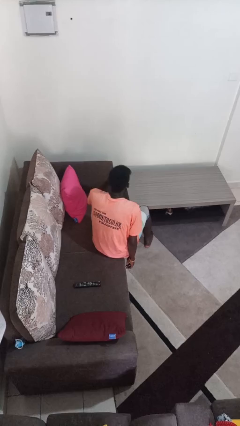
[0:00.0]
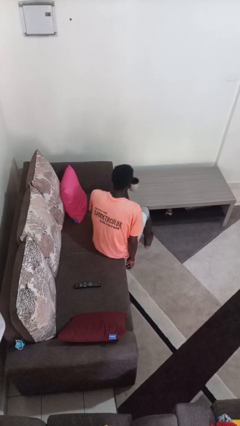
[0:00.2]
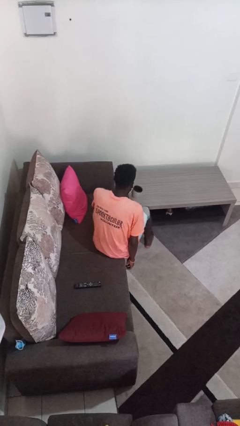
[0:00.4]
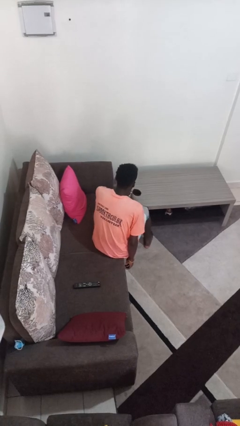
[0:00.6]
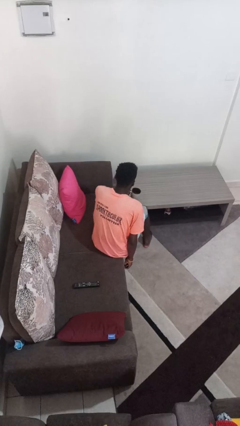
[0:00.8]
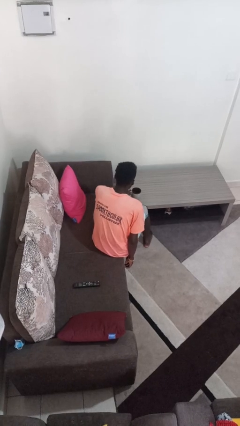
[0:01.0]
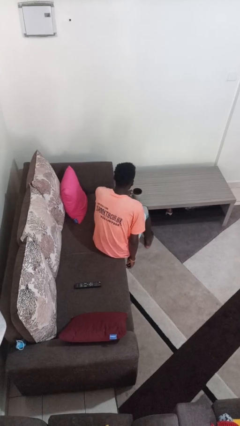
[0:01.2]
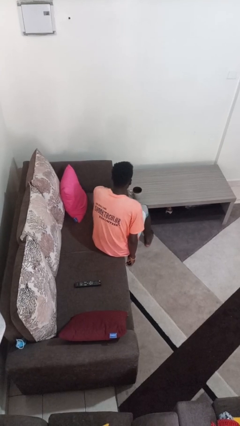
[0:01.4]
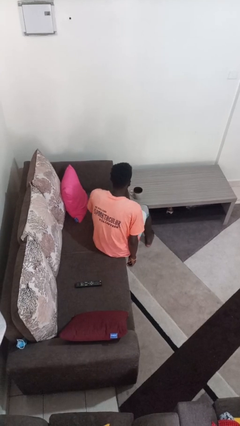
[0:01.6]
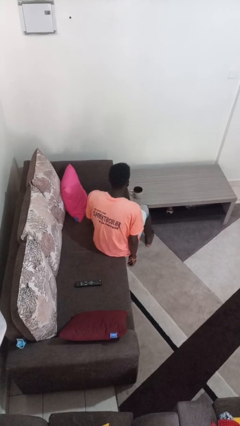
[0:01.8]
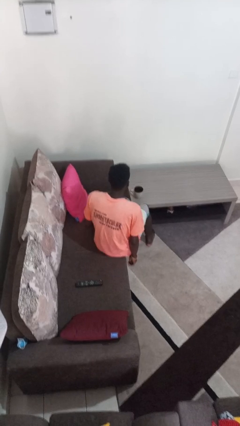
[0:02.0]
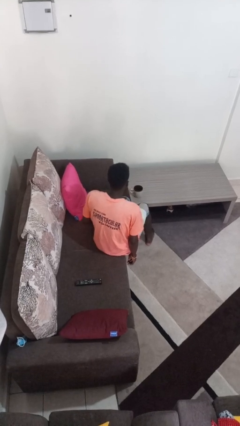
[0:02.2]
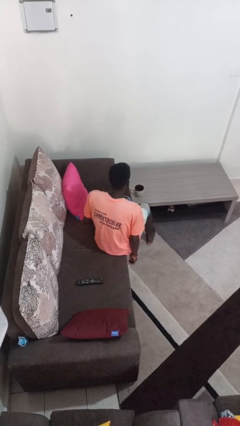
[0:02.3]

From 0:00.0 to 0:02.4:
person puts down object on table

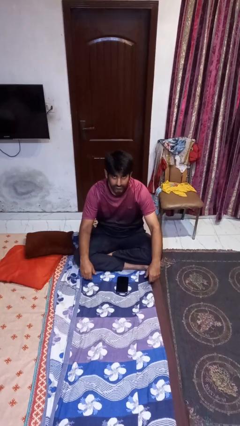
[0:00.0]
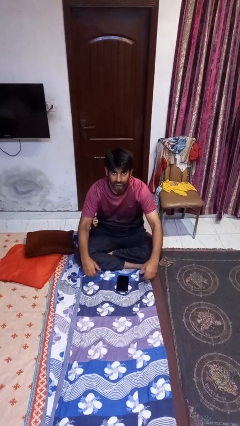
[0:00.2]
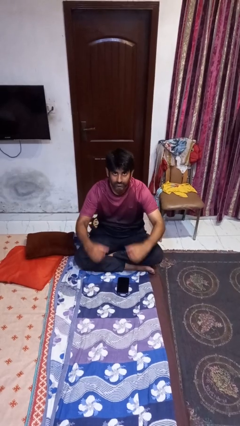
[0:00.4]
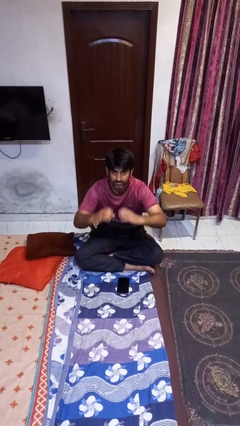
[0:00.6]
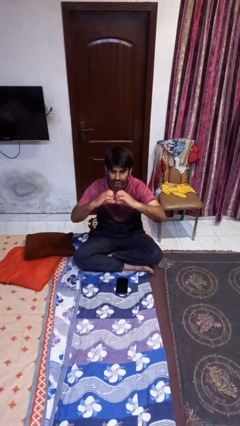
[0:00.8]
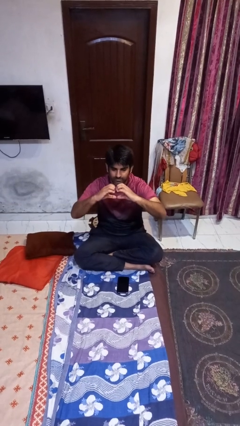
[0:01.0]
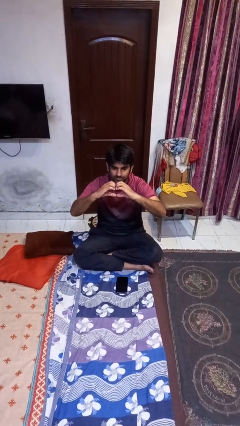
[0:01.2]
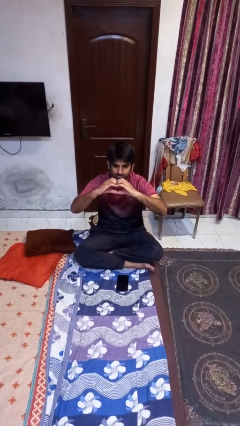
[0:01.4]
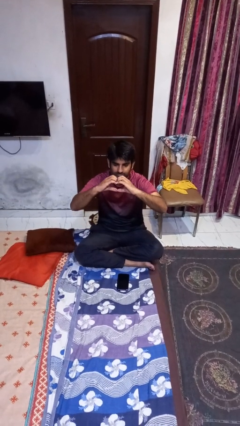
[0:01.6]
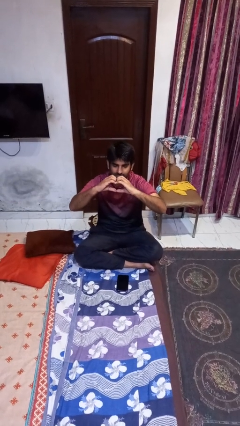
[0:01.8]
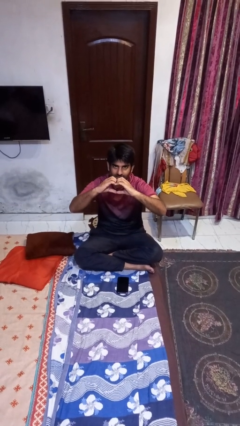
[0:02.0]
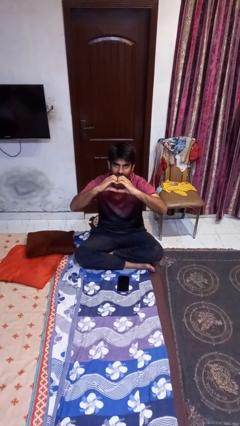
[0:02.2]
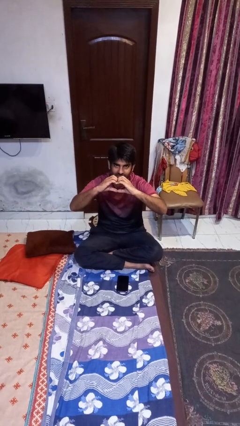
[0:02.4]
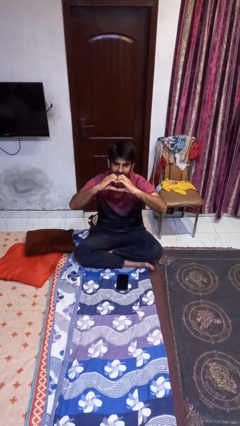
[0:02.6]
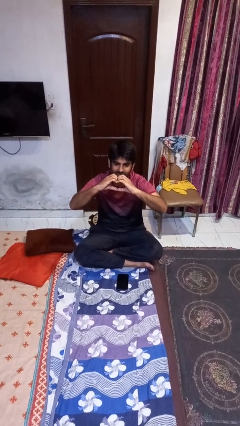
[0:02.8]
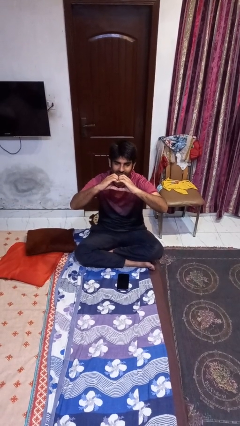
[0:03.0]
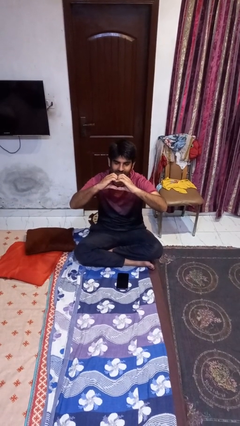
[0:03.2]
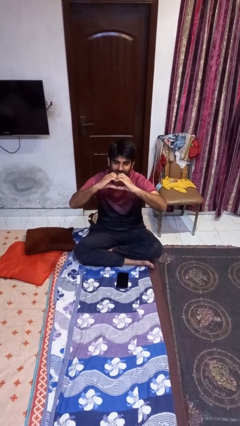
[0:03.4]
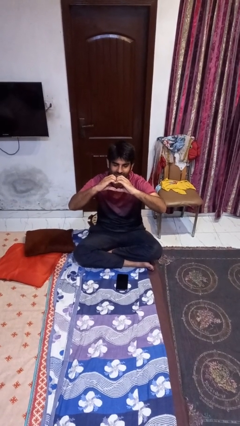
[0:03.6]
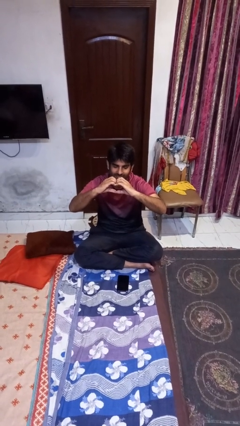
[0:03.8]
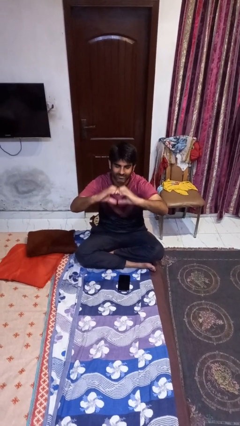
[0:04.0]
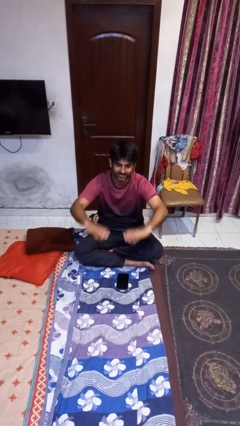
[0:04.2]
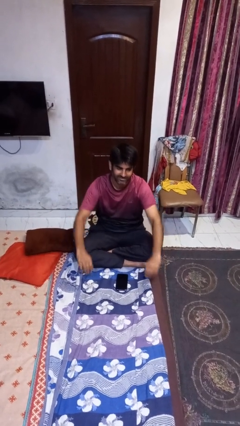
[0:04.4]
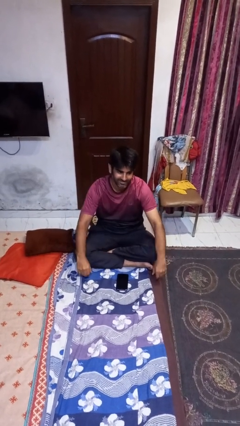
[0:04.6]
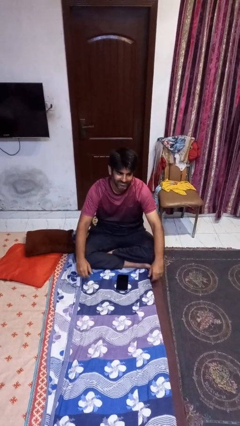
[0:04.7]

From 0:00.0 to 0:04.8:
person gestures heart

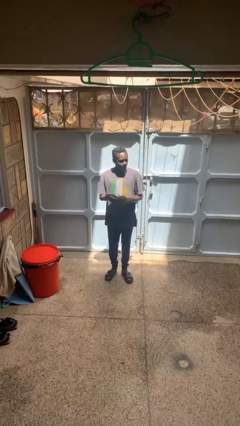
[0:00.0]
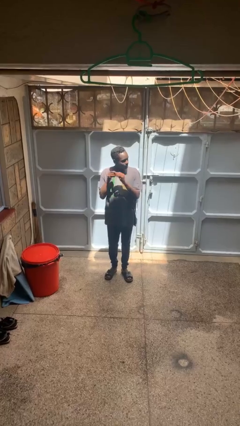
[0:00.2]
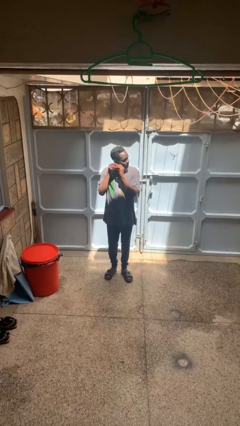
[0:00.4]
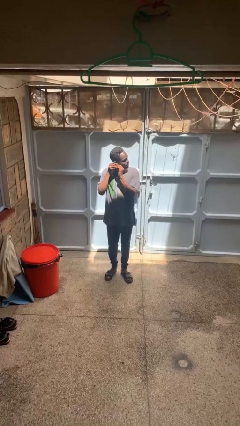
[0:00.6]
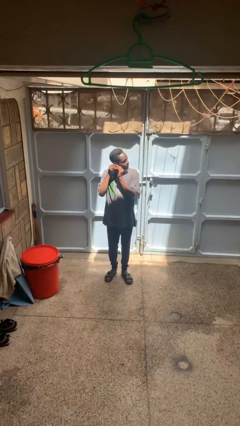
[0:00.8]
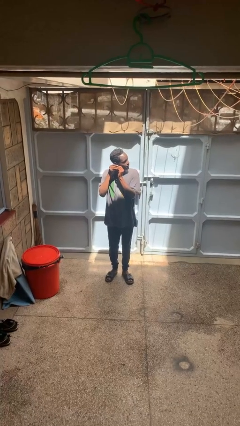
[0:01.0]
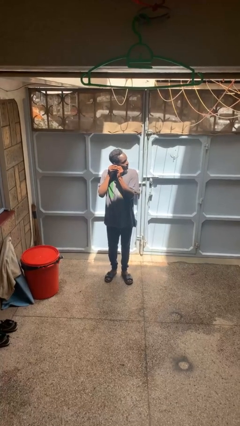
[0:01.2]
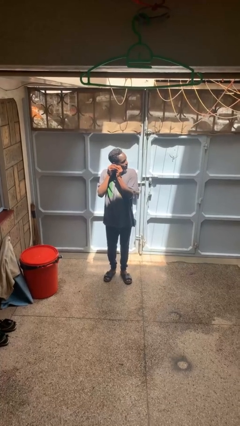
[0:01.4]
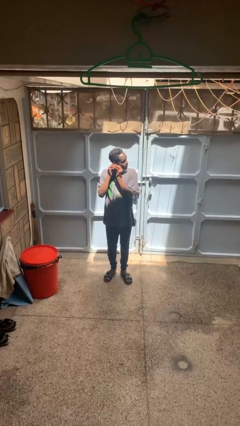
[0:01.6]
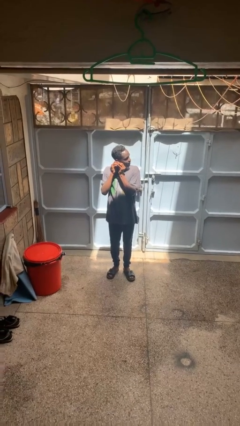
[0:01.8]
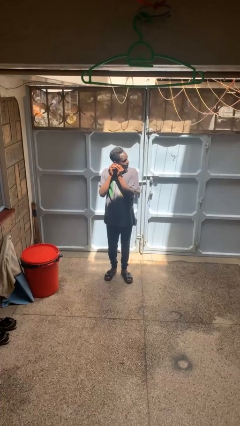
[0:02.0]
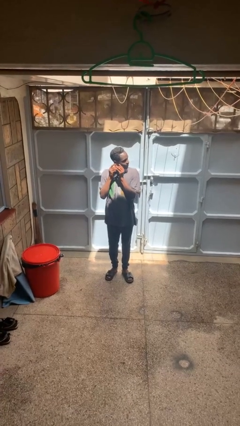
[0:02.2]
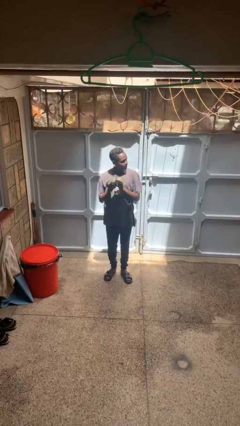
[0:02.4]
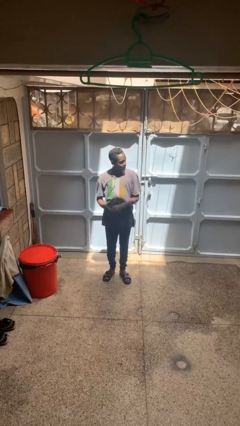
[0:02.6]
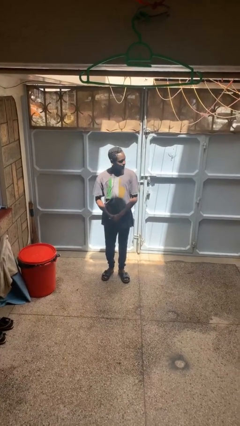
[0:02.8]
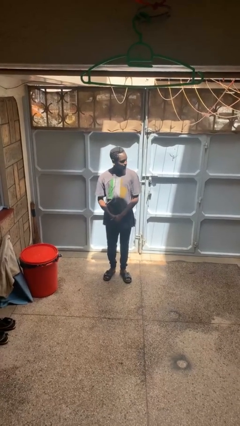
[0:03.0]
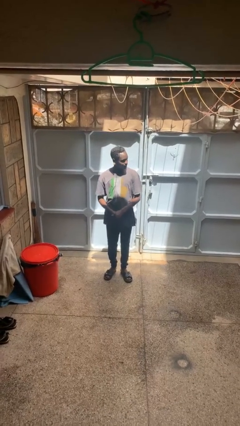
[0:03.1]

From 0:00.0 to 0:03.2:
person puts on earrings

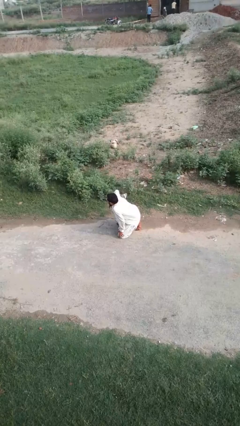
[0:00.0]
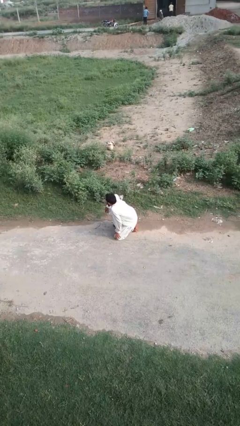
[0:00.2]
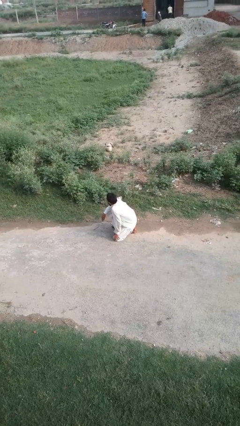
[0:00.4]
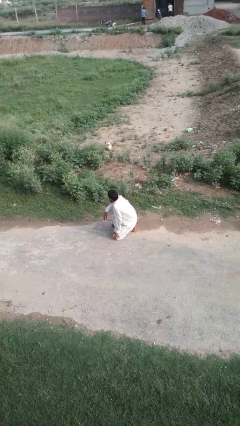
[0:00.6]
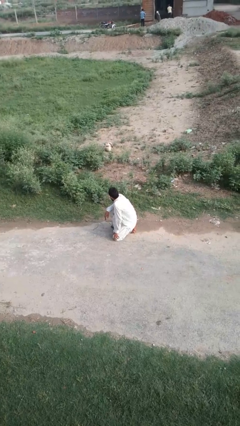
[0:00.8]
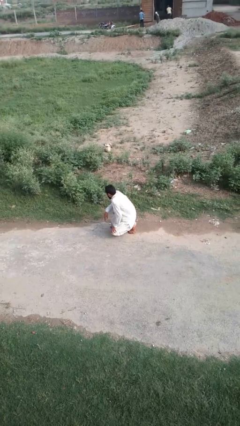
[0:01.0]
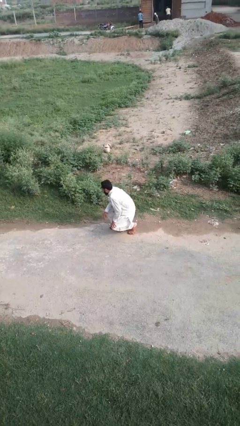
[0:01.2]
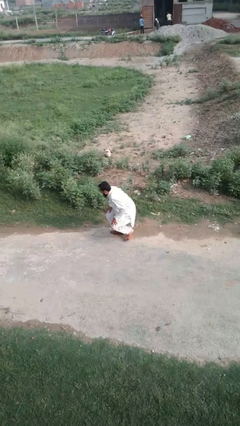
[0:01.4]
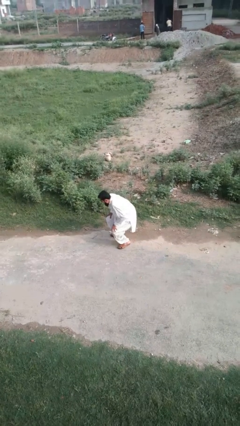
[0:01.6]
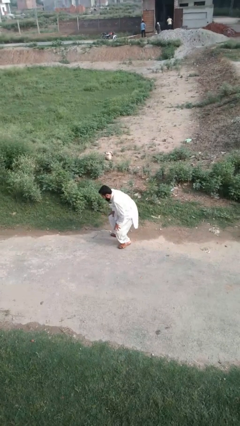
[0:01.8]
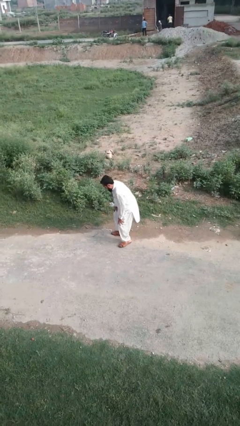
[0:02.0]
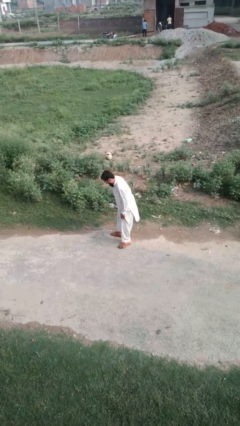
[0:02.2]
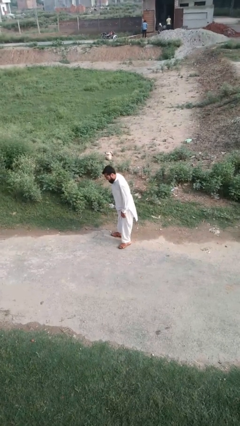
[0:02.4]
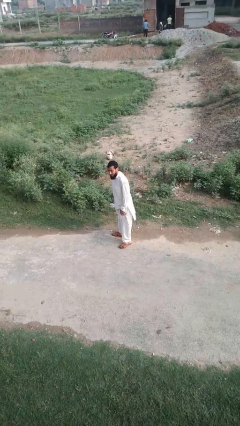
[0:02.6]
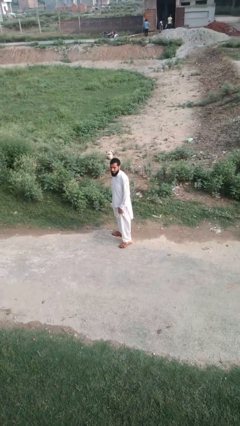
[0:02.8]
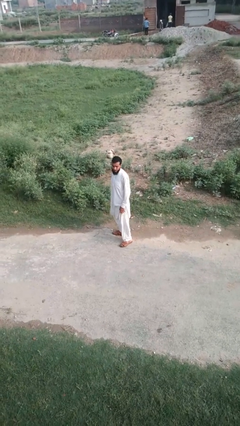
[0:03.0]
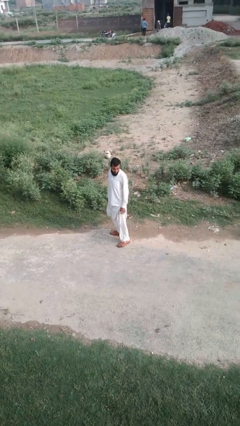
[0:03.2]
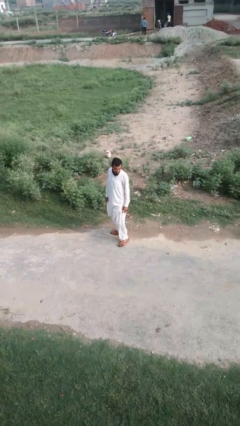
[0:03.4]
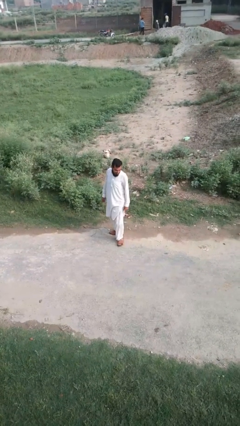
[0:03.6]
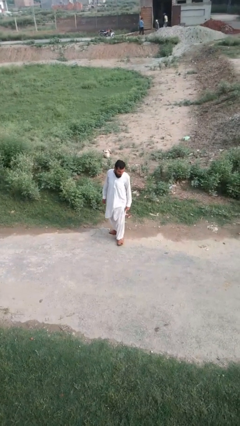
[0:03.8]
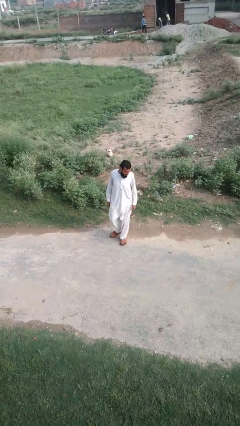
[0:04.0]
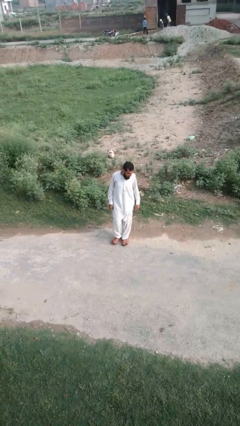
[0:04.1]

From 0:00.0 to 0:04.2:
person stands up from floor

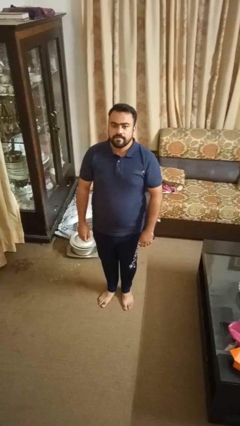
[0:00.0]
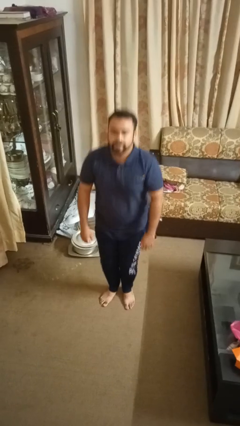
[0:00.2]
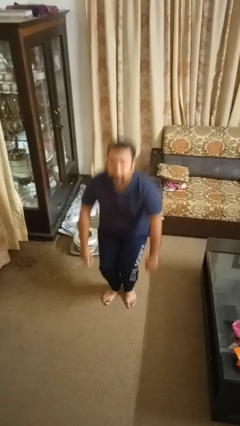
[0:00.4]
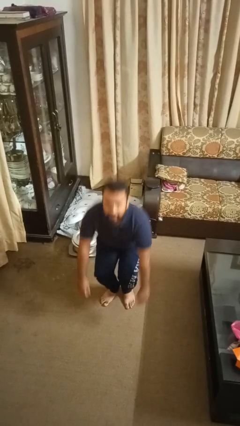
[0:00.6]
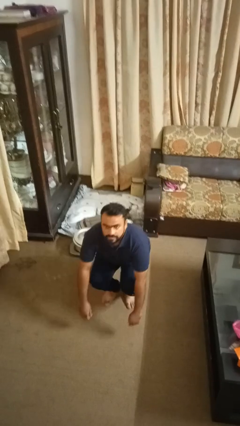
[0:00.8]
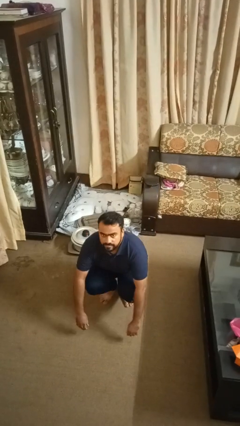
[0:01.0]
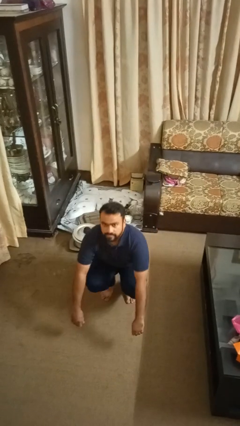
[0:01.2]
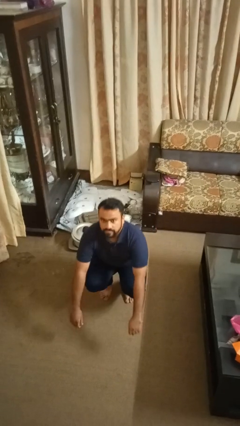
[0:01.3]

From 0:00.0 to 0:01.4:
person squats

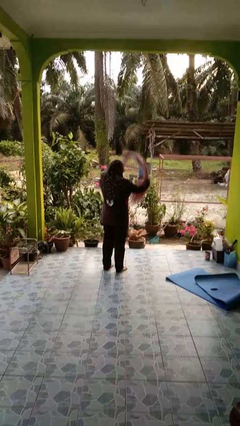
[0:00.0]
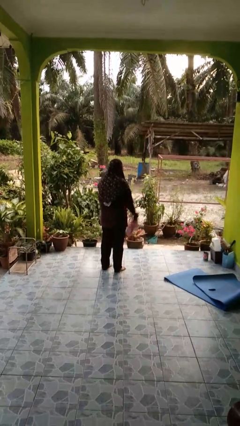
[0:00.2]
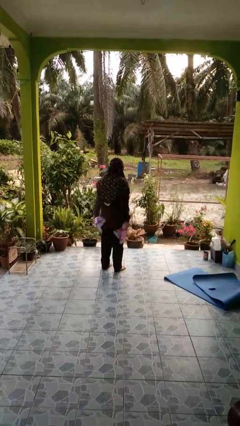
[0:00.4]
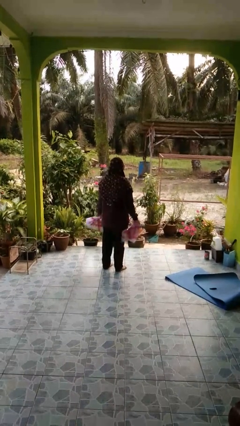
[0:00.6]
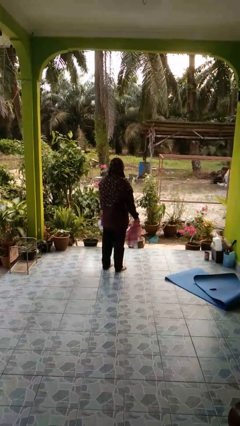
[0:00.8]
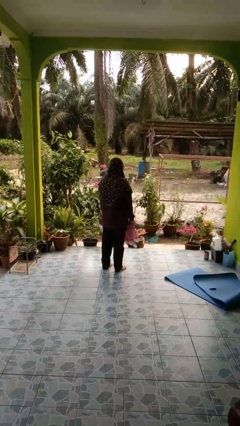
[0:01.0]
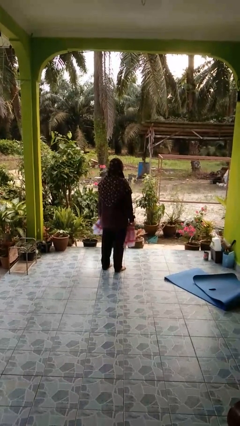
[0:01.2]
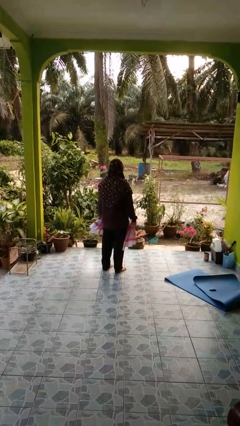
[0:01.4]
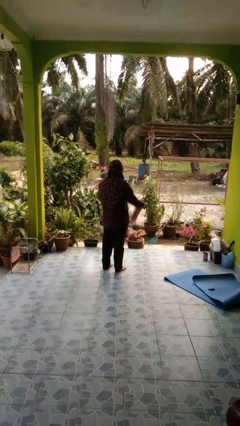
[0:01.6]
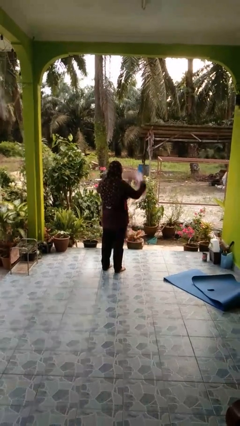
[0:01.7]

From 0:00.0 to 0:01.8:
person takes off scarf
